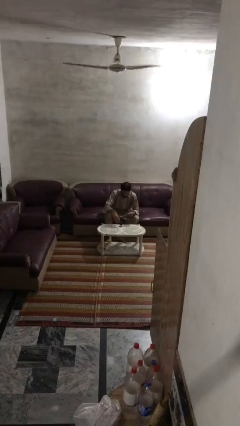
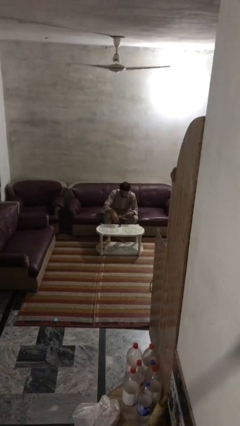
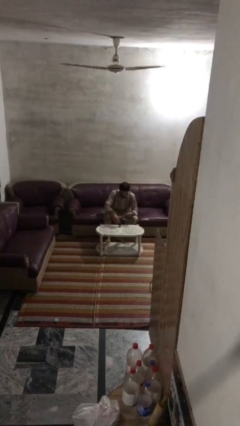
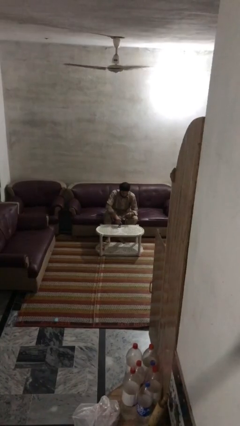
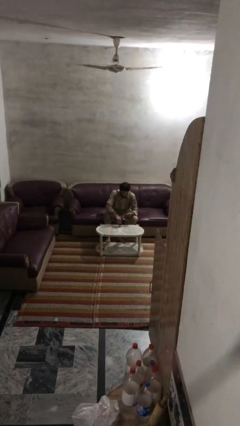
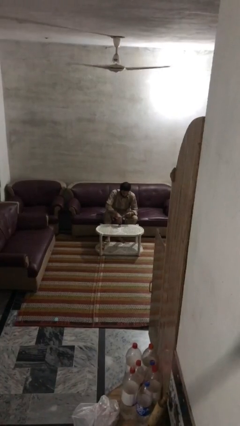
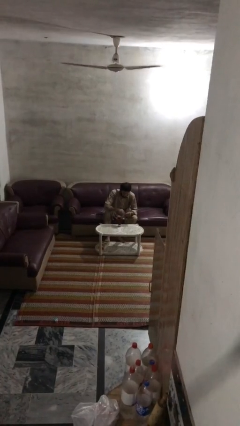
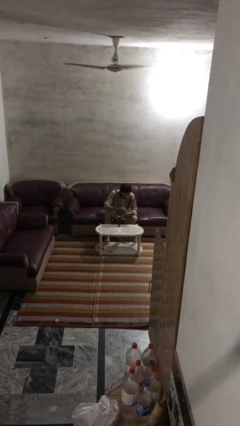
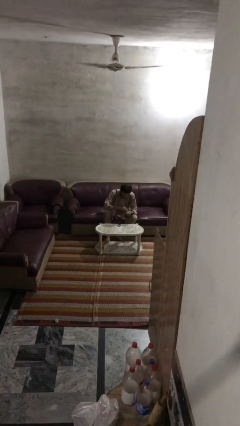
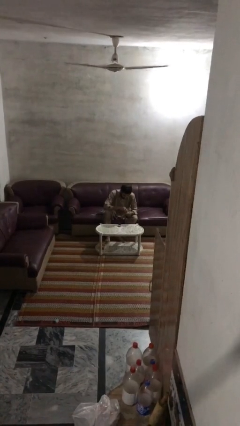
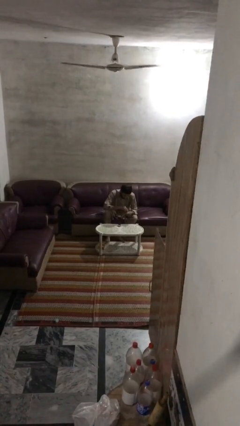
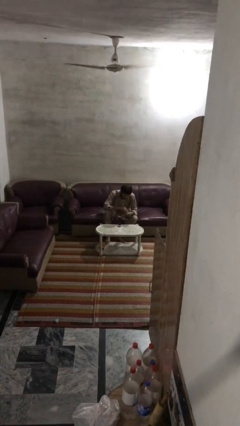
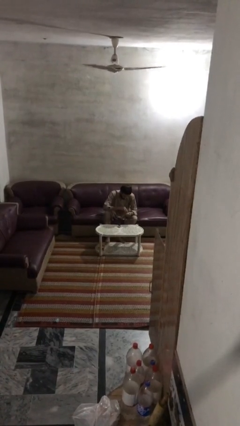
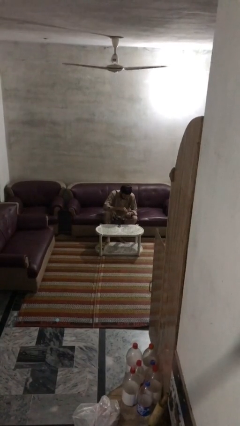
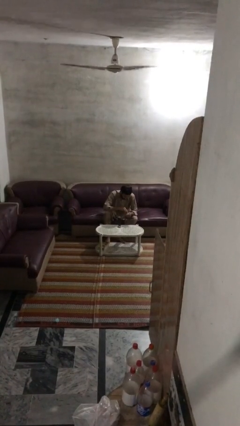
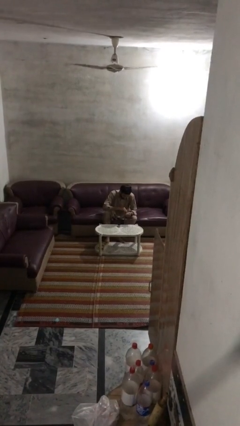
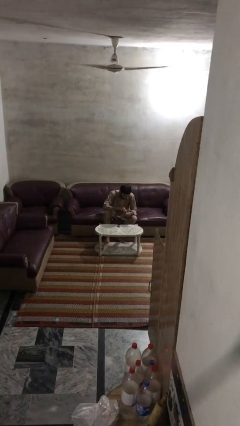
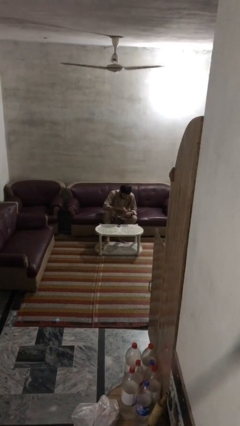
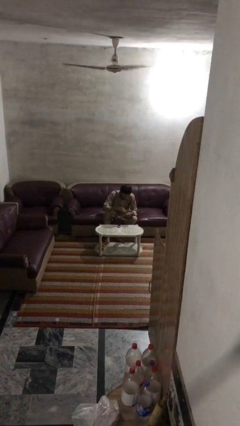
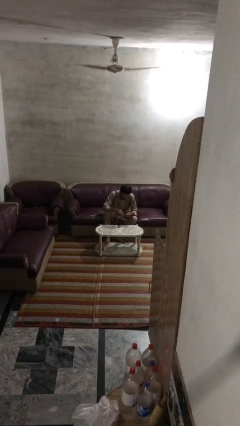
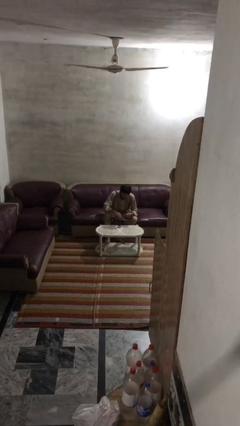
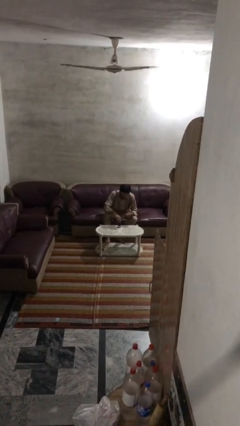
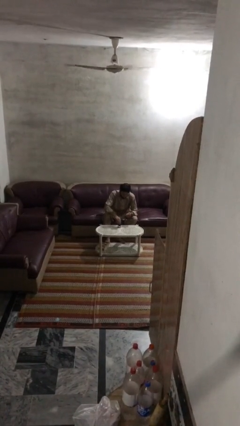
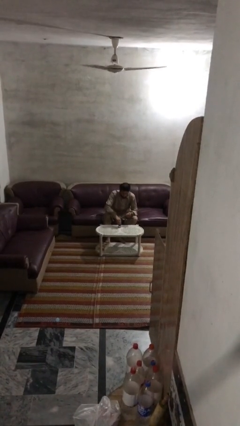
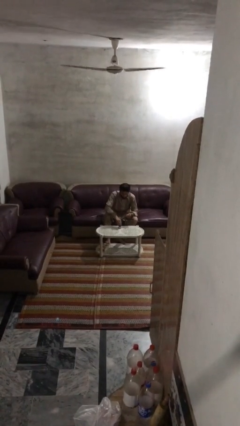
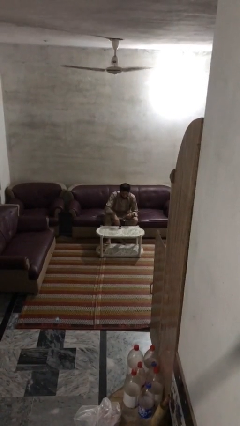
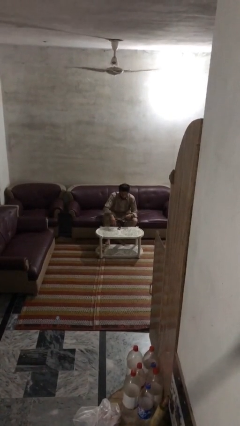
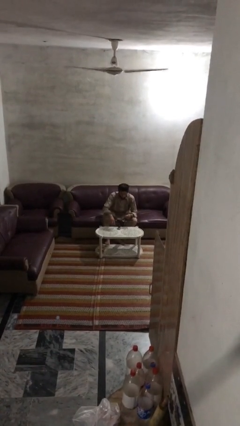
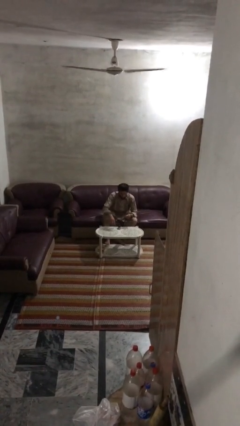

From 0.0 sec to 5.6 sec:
person paints fingernails

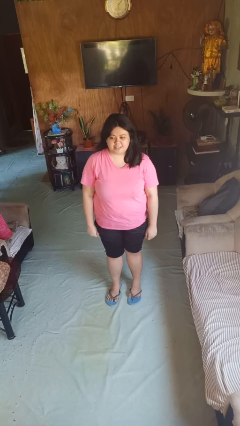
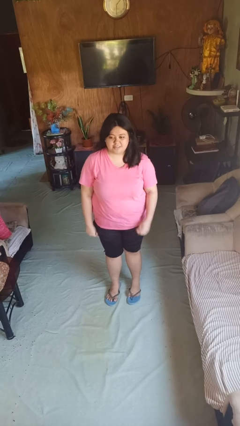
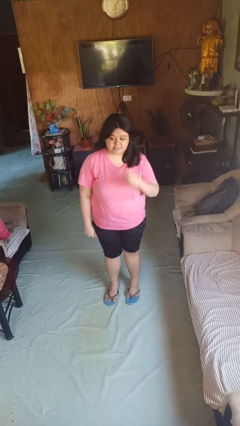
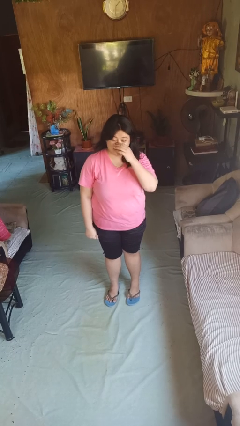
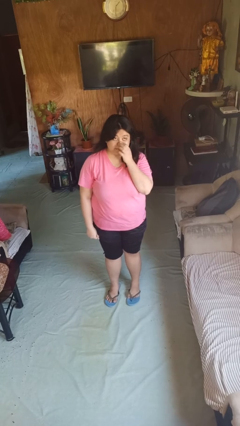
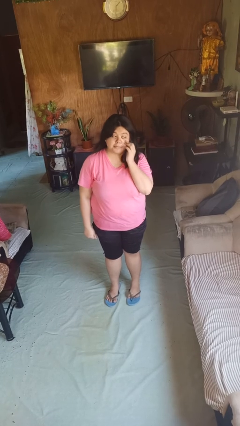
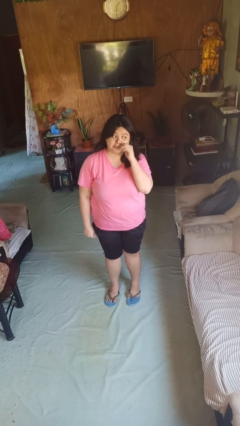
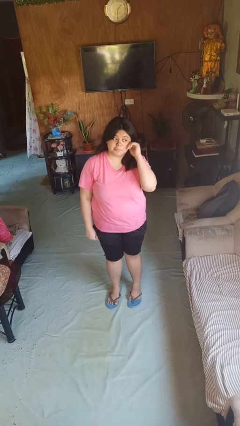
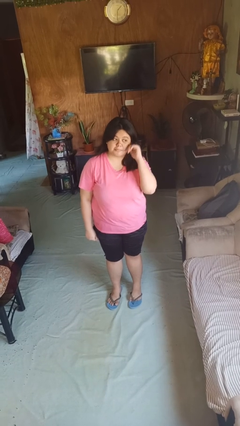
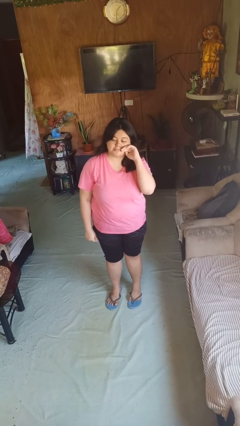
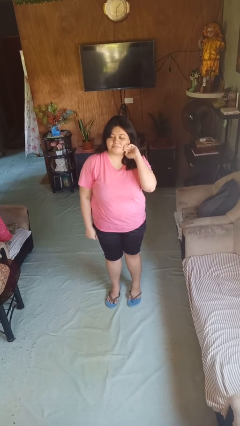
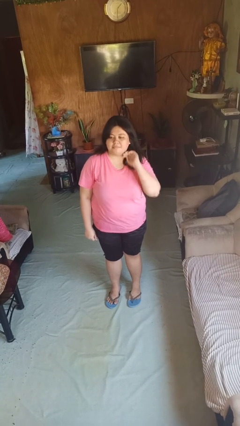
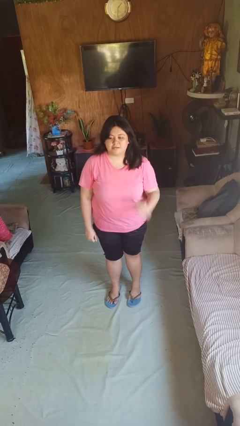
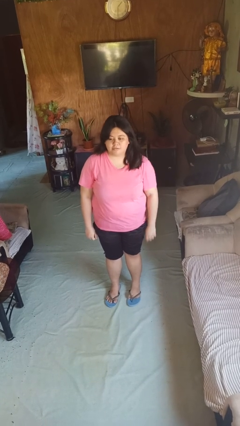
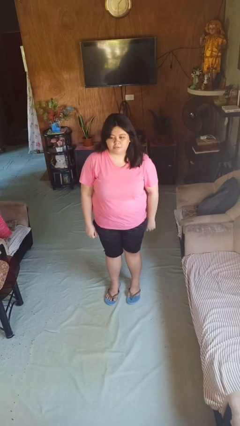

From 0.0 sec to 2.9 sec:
person scratches face

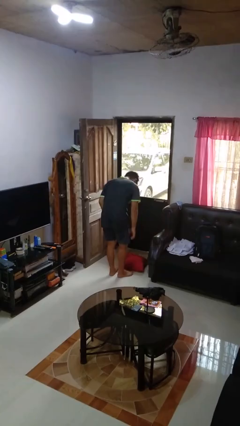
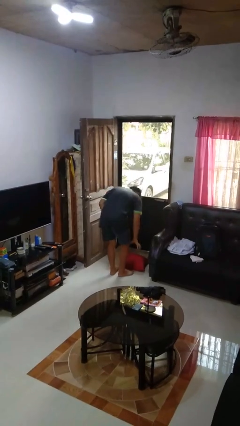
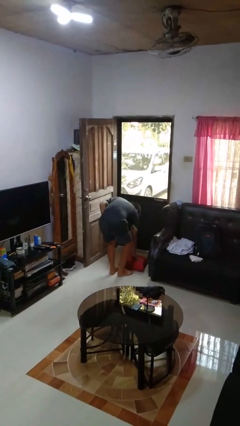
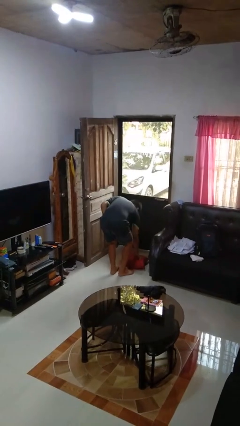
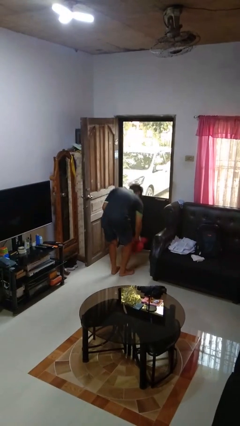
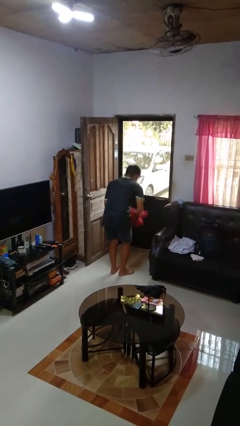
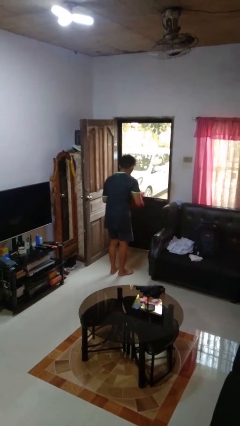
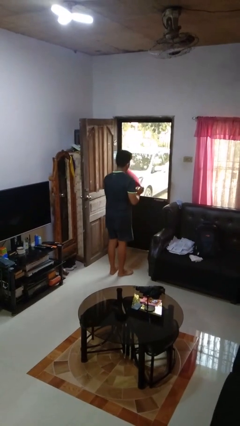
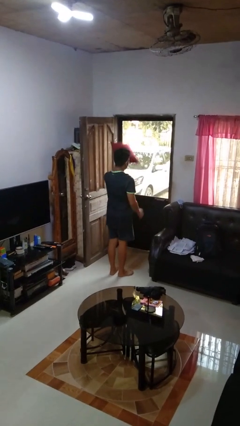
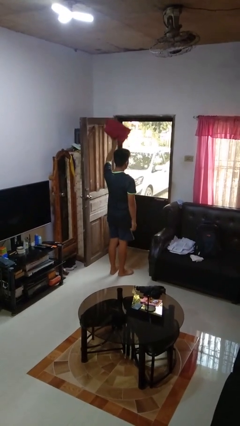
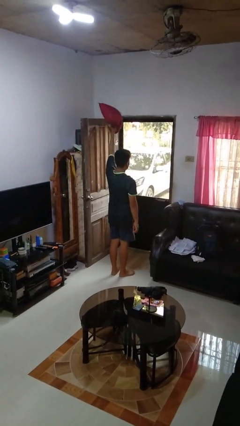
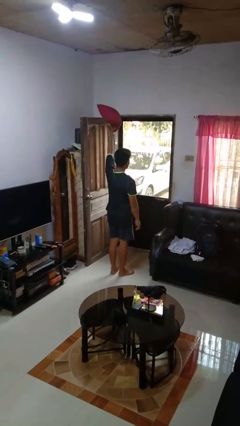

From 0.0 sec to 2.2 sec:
person picks up object from floor

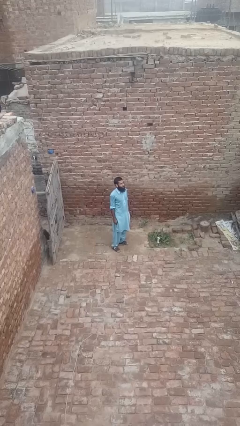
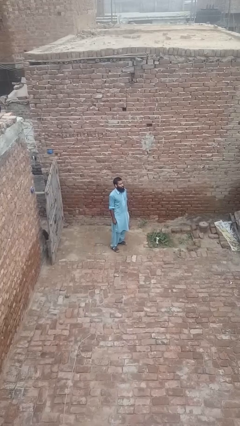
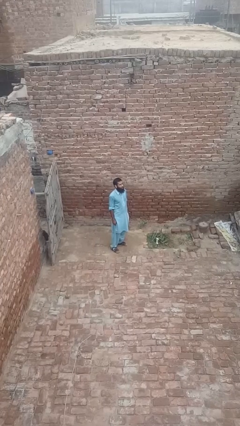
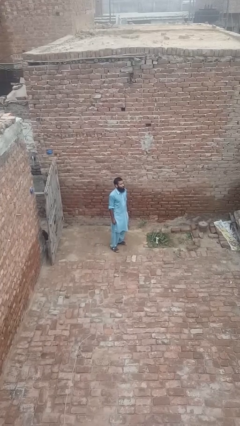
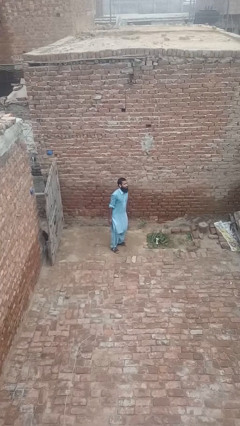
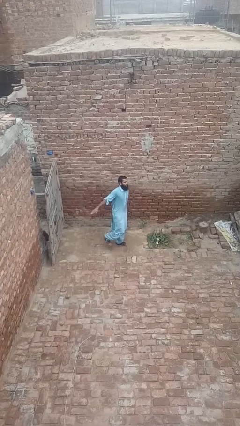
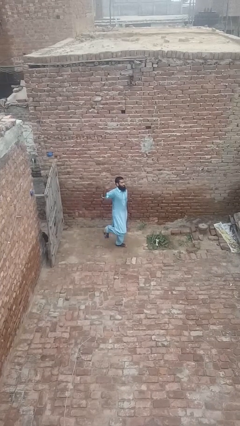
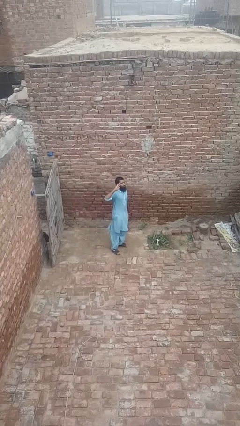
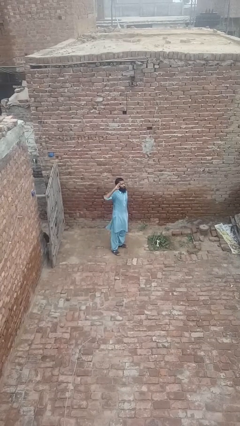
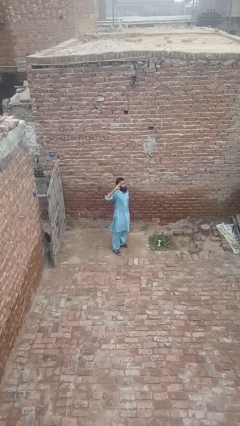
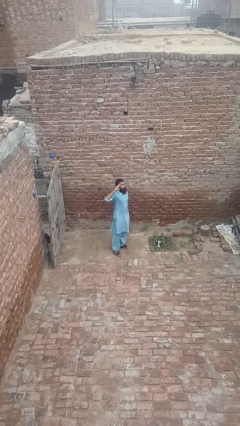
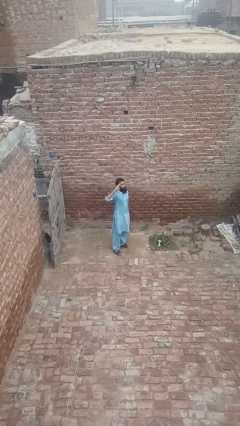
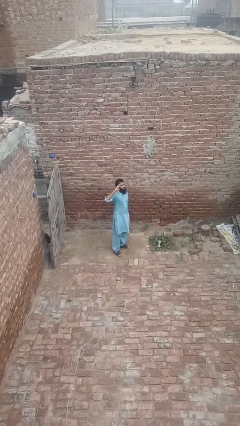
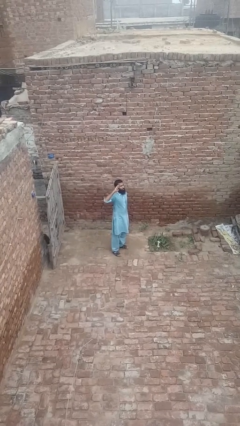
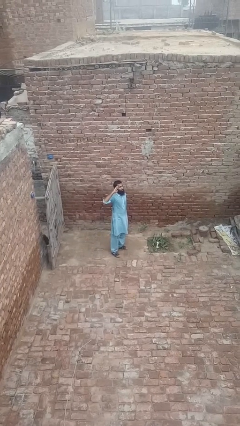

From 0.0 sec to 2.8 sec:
person salutes

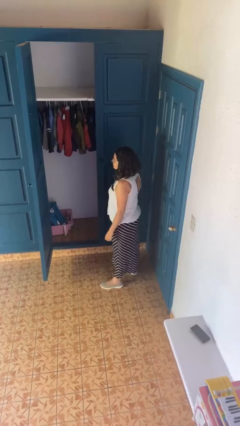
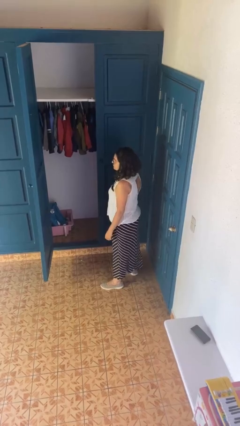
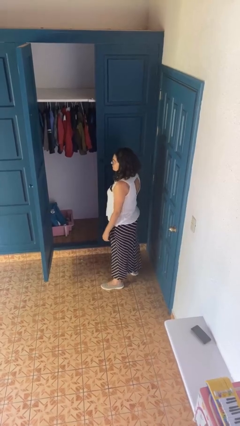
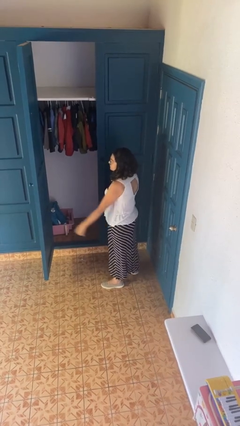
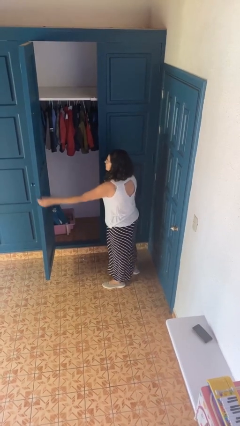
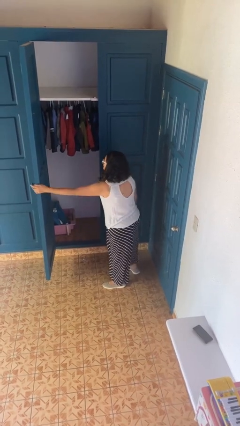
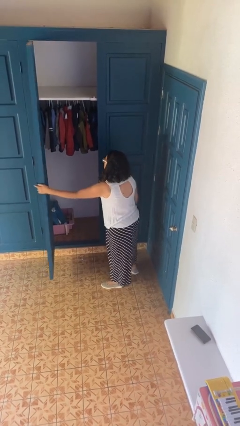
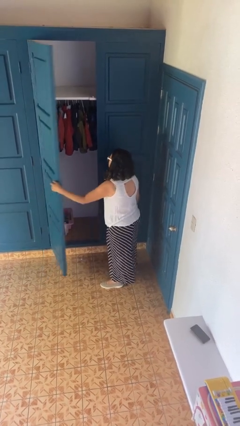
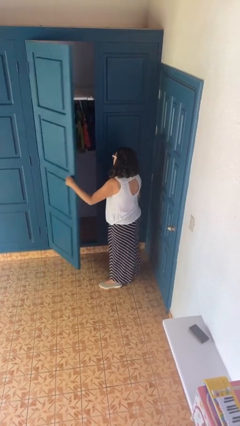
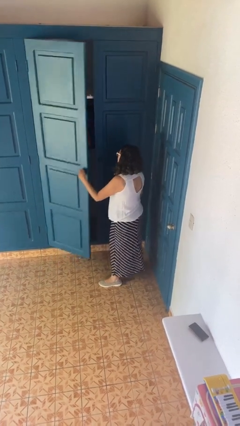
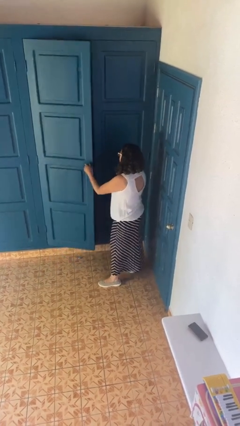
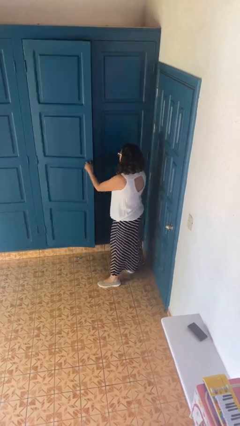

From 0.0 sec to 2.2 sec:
person closes closet door

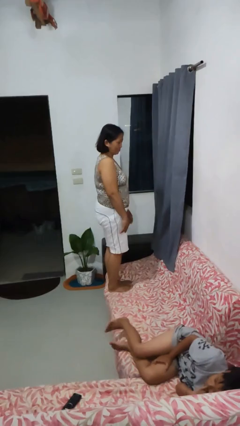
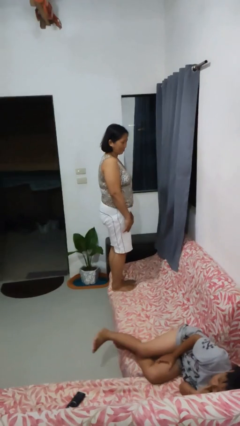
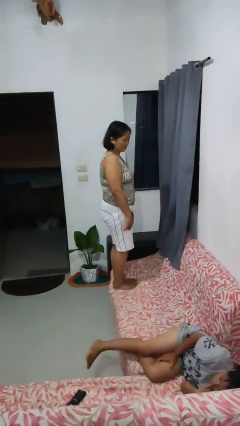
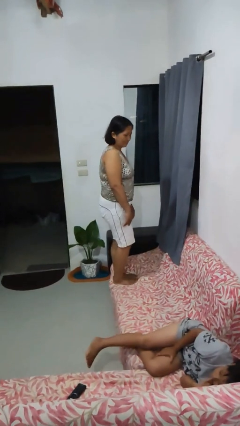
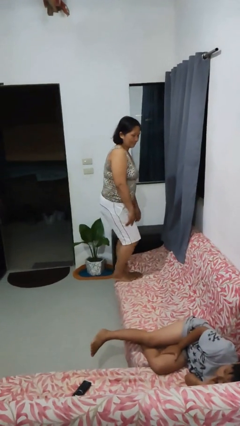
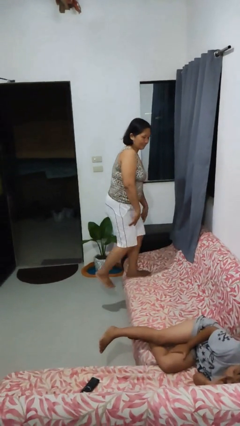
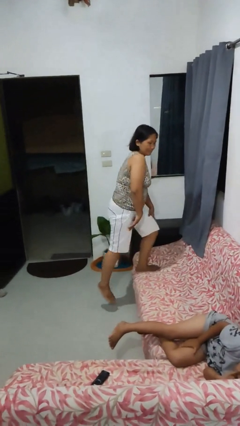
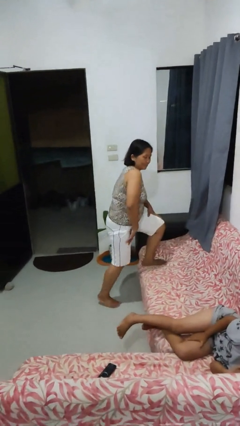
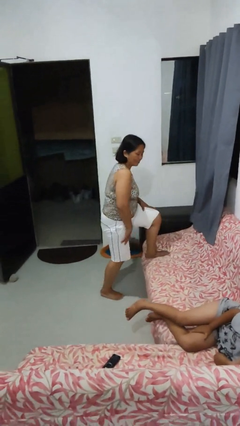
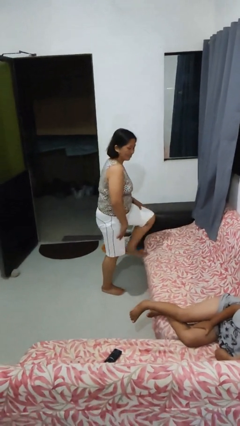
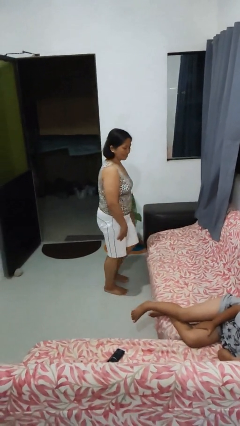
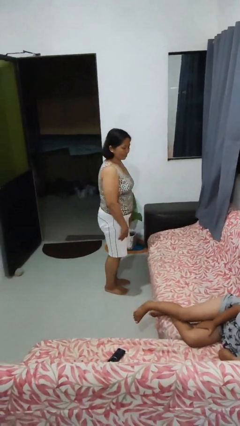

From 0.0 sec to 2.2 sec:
person climbs off couch
